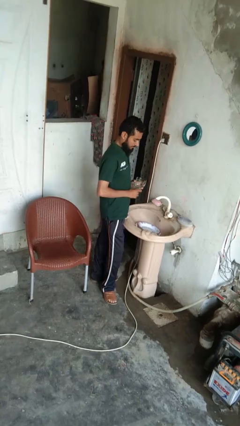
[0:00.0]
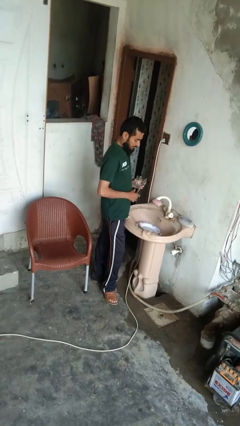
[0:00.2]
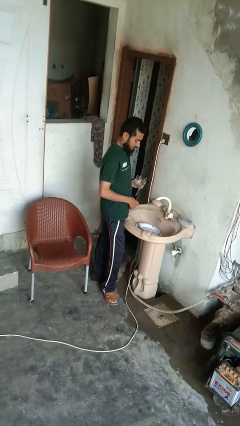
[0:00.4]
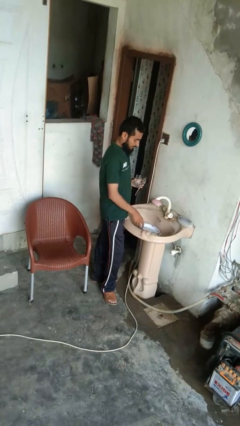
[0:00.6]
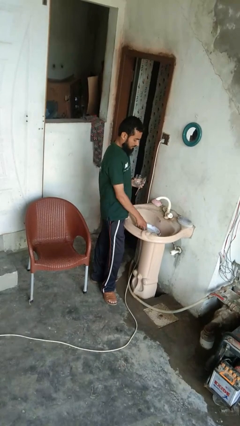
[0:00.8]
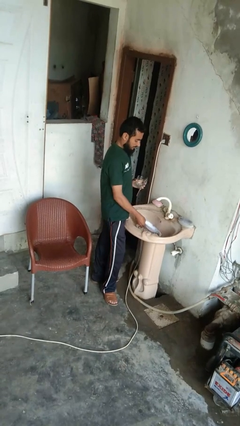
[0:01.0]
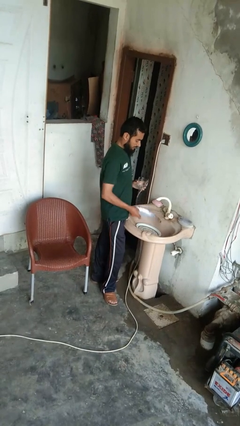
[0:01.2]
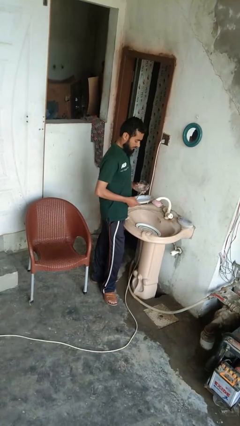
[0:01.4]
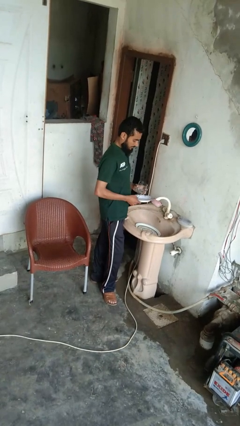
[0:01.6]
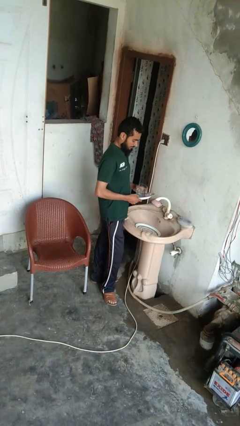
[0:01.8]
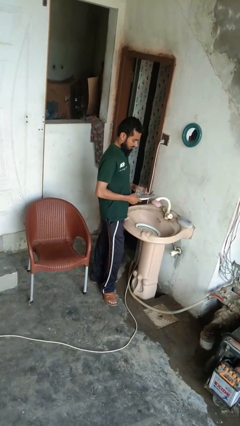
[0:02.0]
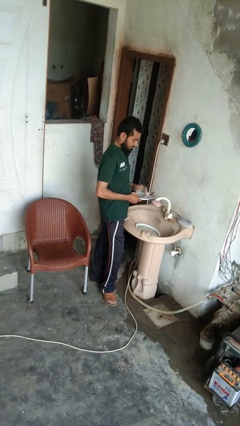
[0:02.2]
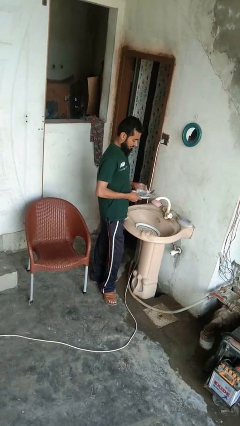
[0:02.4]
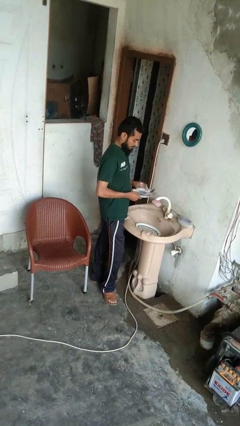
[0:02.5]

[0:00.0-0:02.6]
person unloads dishwasher

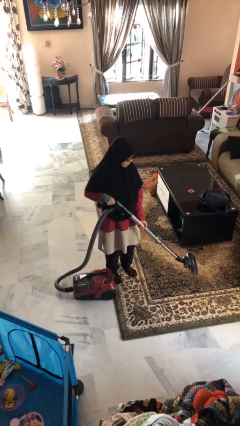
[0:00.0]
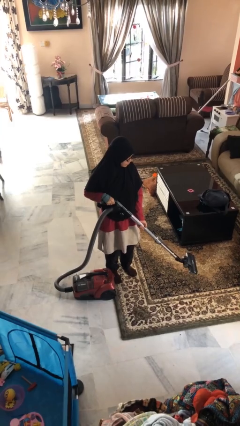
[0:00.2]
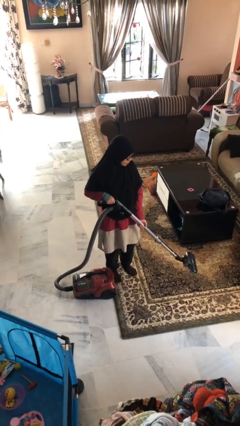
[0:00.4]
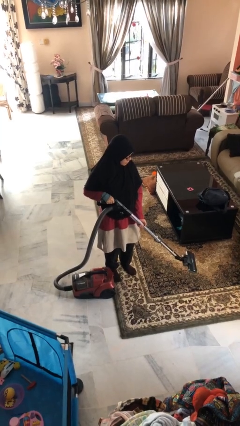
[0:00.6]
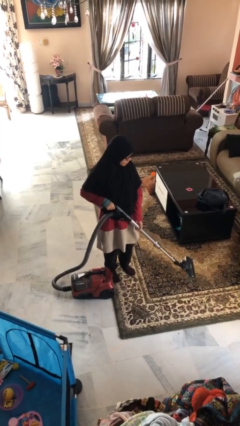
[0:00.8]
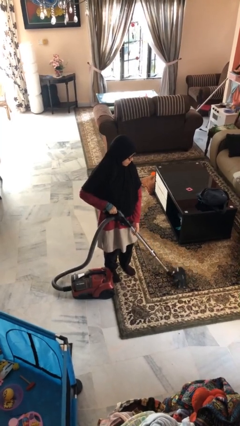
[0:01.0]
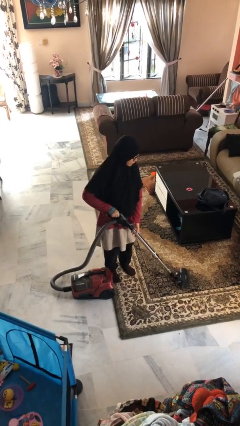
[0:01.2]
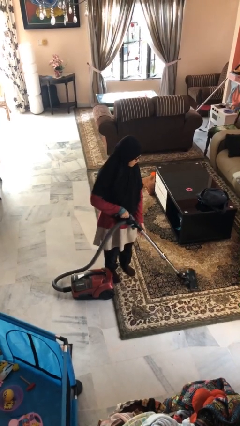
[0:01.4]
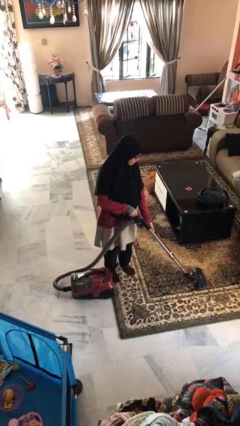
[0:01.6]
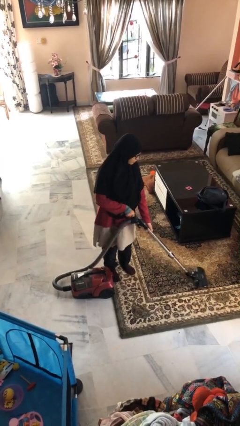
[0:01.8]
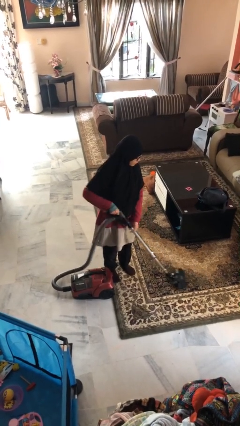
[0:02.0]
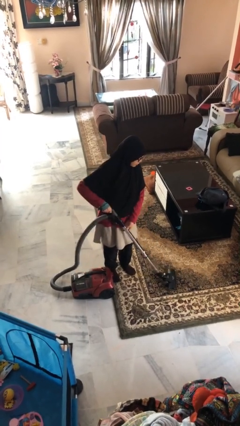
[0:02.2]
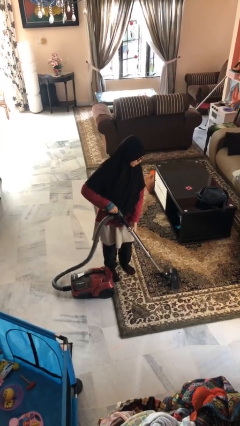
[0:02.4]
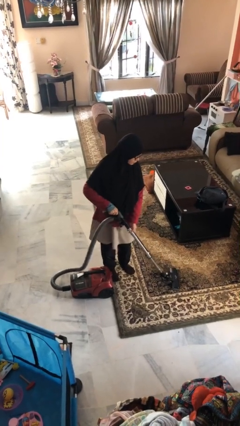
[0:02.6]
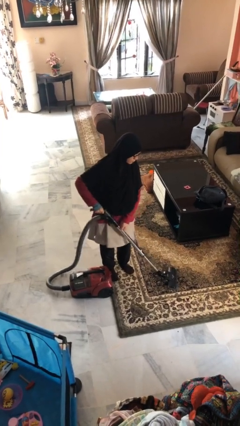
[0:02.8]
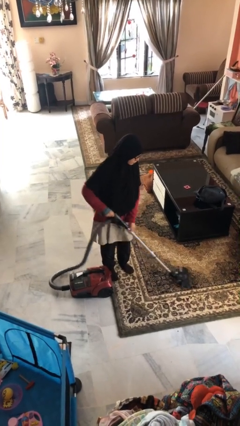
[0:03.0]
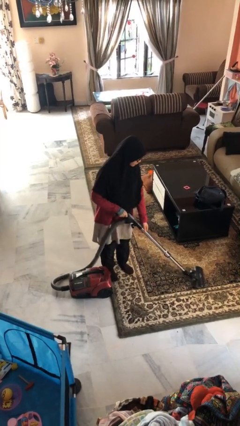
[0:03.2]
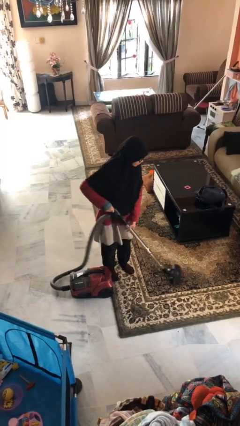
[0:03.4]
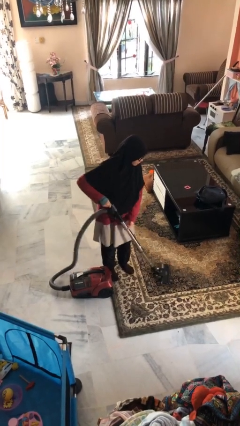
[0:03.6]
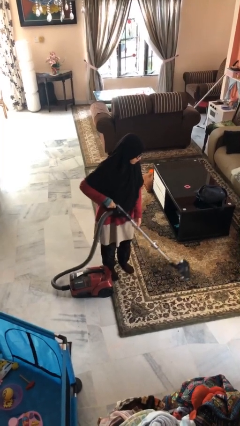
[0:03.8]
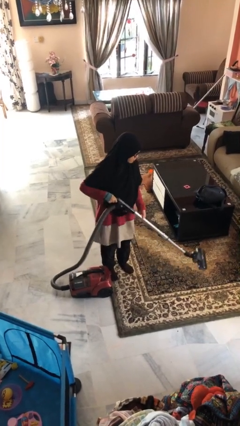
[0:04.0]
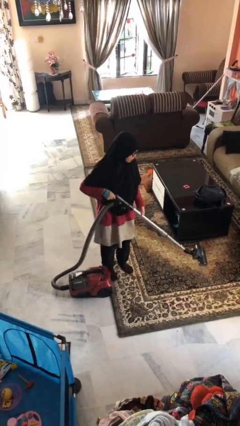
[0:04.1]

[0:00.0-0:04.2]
person vacuums carpet

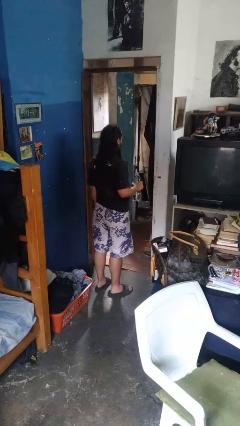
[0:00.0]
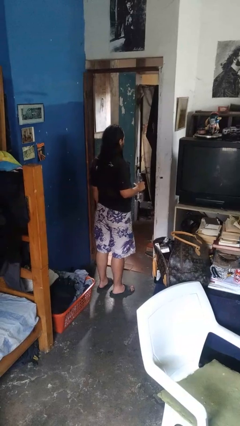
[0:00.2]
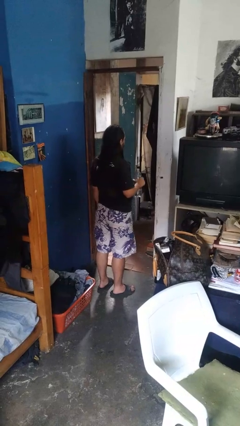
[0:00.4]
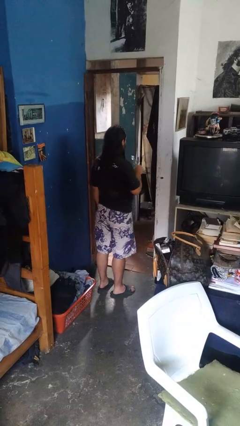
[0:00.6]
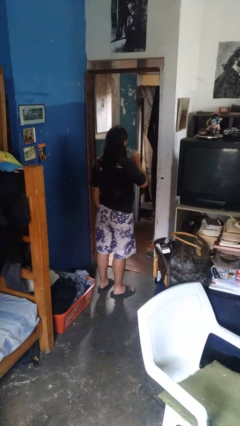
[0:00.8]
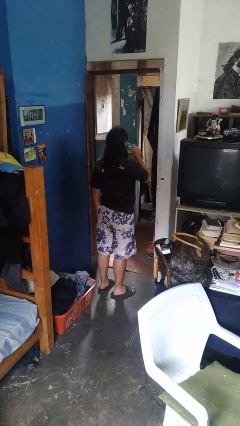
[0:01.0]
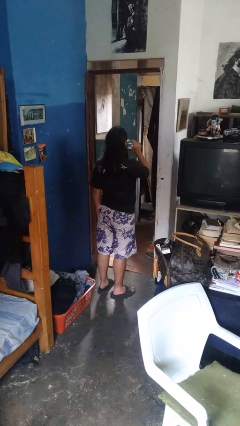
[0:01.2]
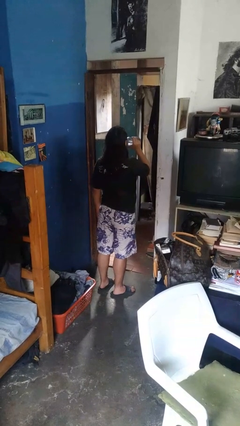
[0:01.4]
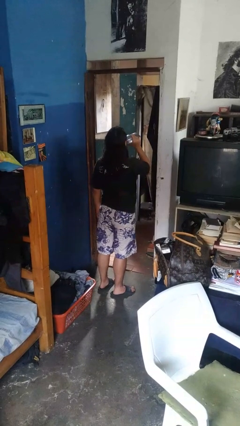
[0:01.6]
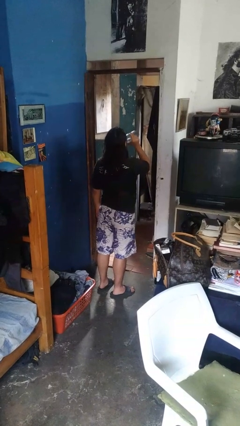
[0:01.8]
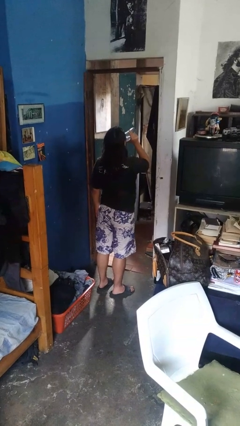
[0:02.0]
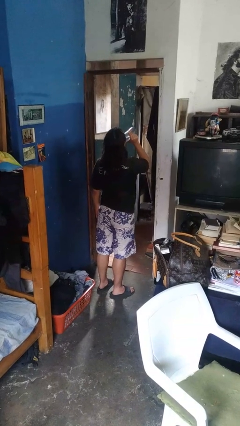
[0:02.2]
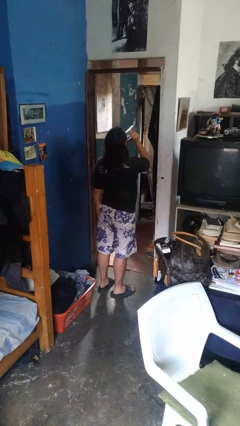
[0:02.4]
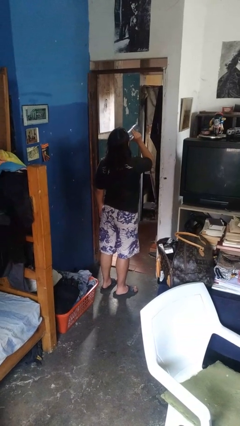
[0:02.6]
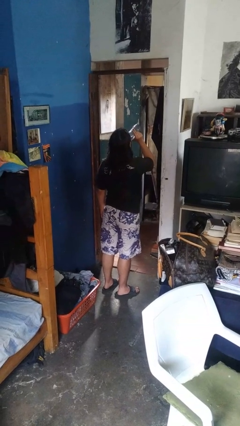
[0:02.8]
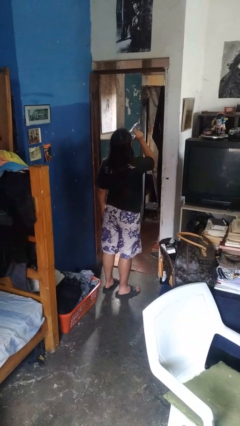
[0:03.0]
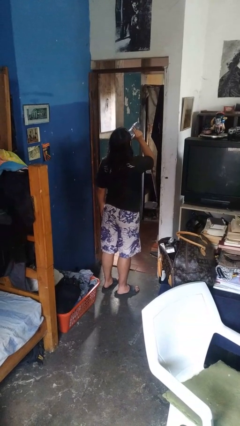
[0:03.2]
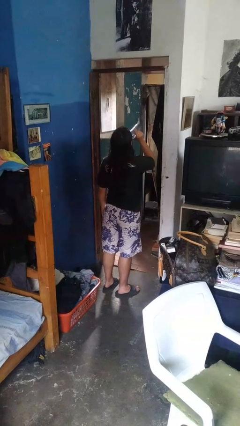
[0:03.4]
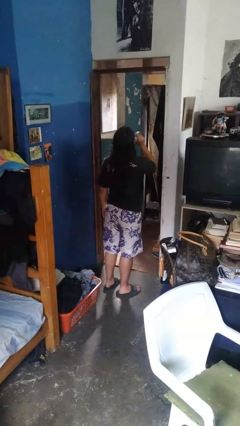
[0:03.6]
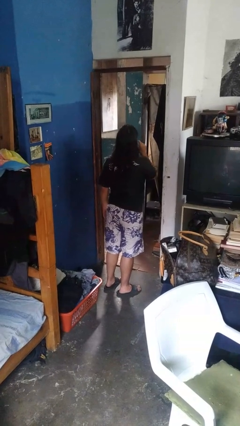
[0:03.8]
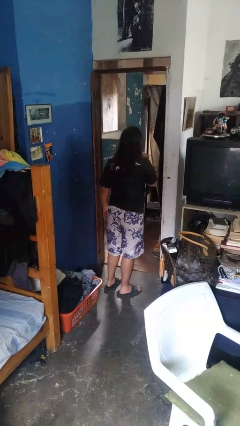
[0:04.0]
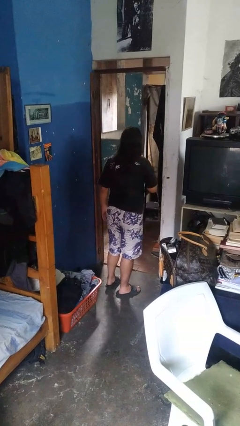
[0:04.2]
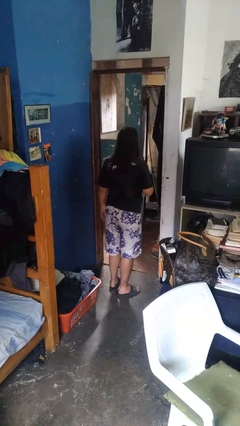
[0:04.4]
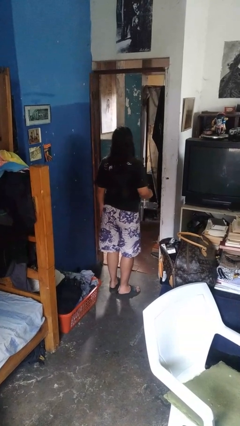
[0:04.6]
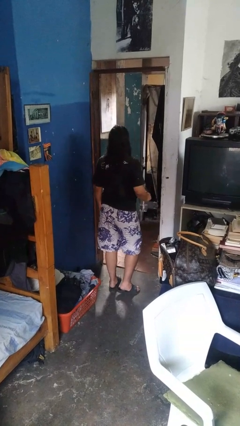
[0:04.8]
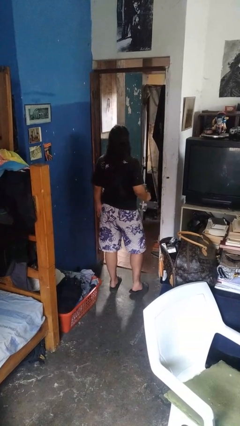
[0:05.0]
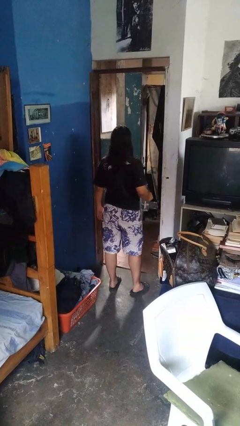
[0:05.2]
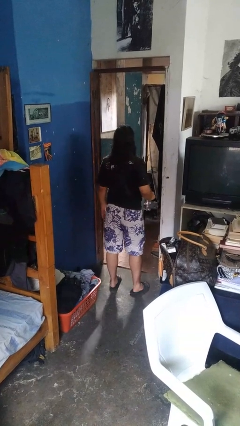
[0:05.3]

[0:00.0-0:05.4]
person drinks from bottle

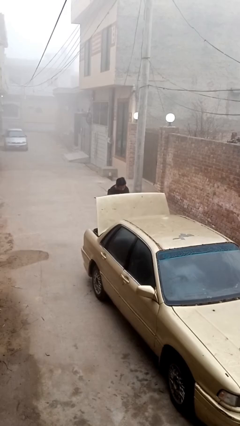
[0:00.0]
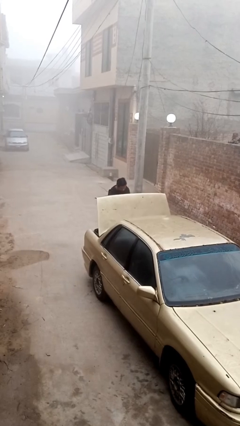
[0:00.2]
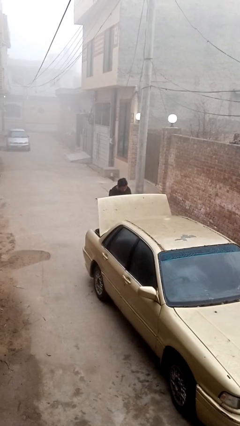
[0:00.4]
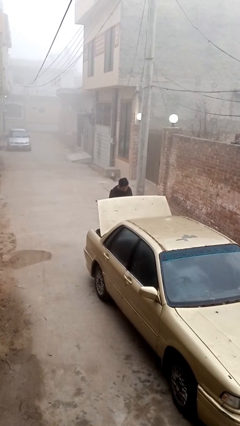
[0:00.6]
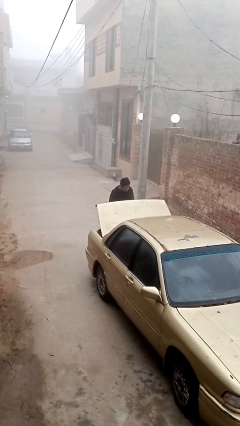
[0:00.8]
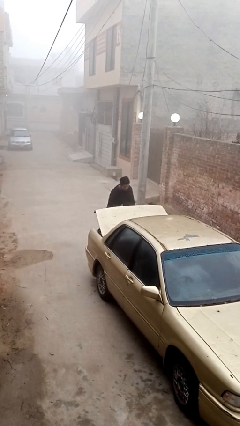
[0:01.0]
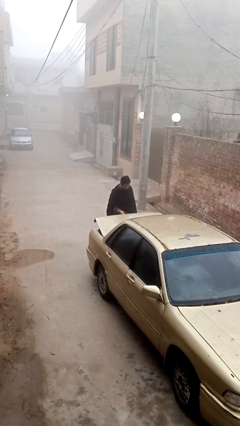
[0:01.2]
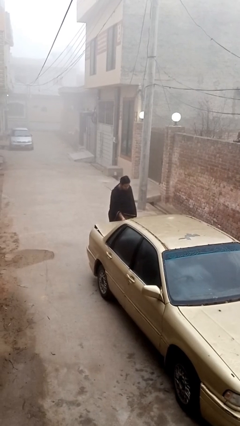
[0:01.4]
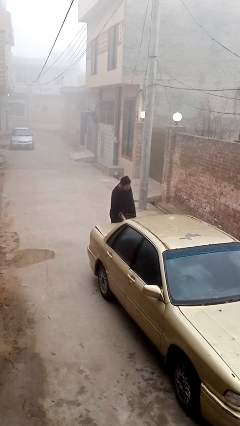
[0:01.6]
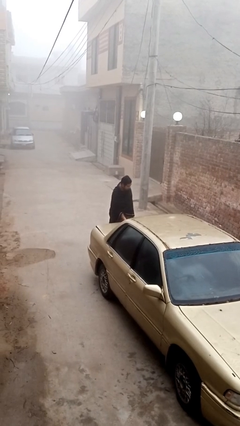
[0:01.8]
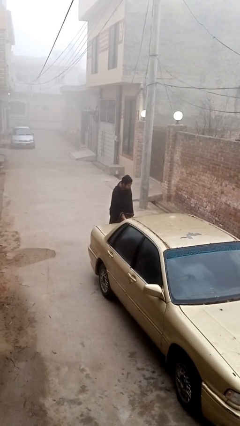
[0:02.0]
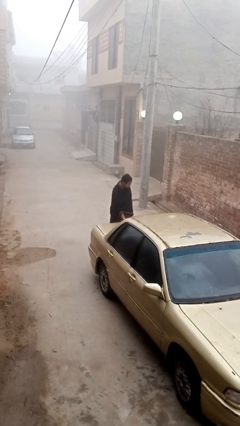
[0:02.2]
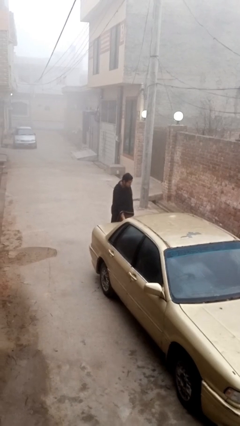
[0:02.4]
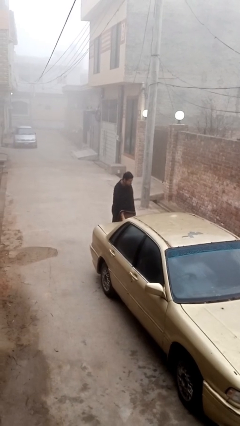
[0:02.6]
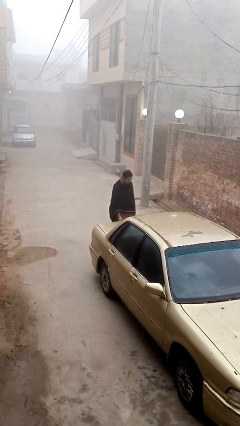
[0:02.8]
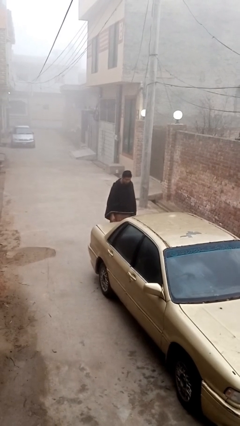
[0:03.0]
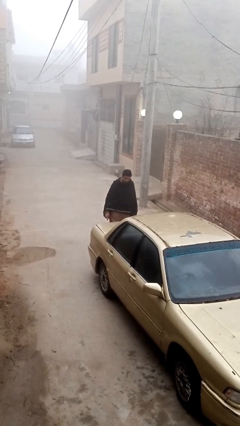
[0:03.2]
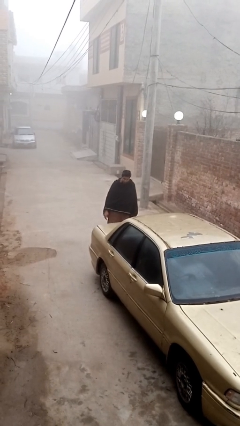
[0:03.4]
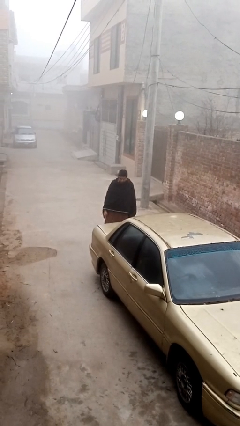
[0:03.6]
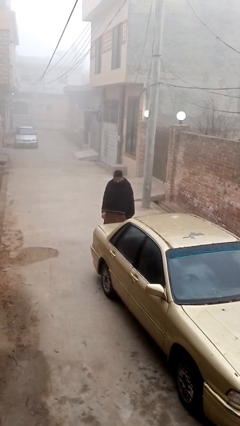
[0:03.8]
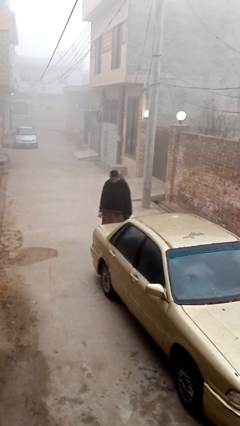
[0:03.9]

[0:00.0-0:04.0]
person closes car trunk

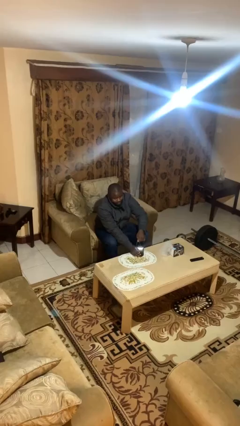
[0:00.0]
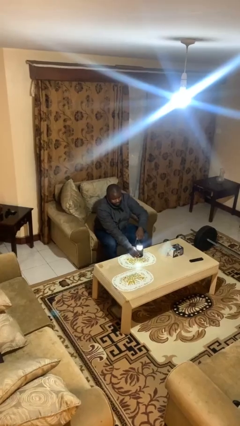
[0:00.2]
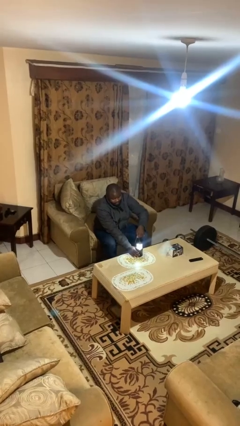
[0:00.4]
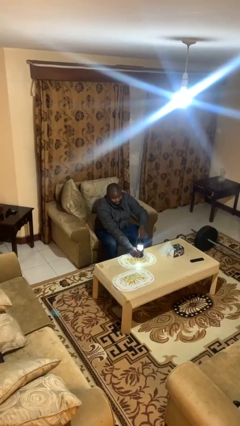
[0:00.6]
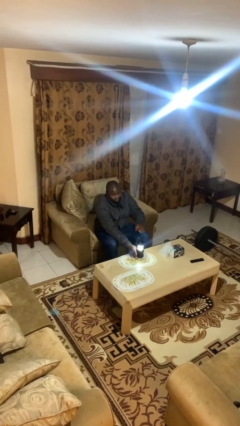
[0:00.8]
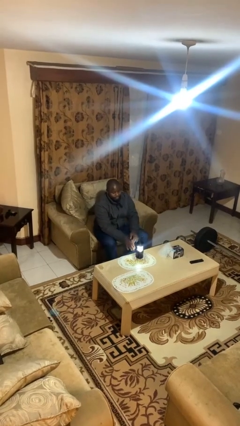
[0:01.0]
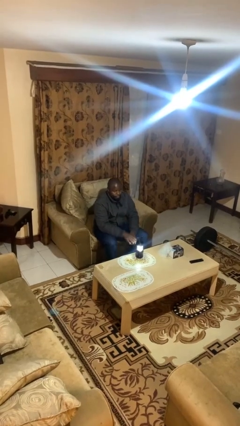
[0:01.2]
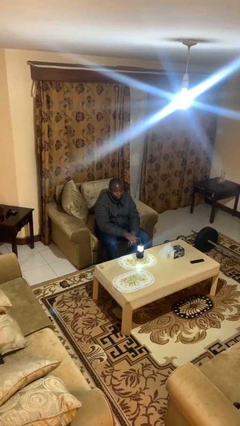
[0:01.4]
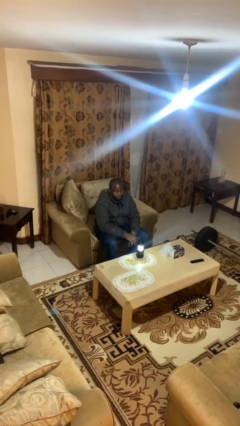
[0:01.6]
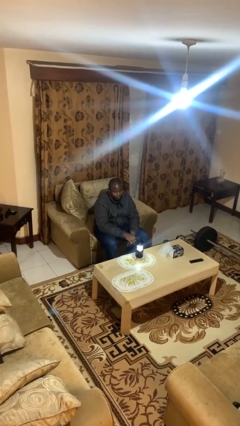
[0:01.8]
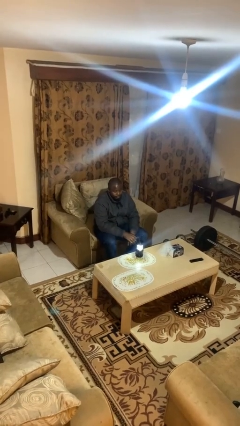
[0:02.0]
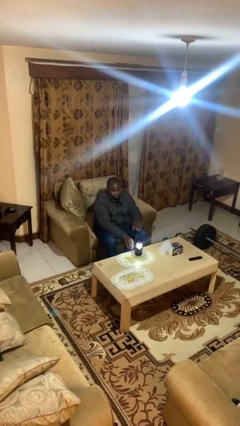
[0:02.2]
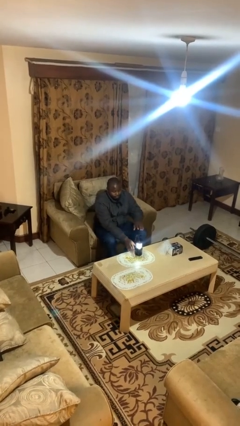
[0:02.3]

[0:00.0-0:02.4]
person turns on lamp
